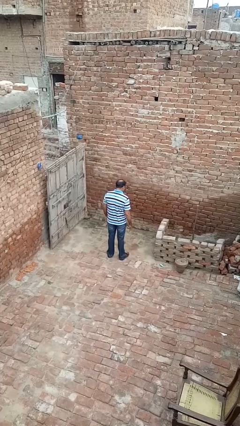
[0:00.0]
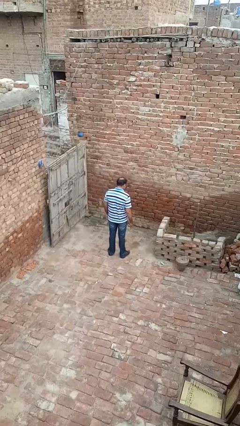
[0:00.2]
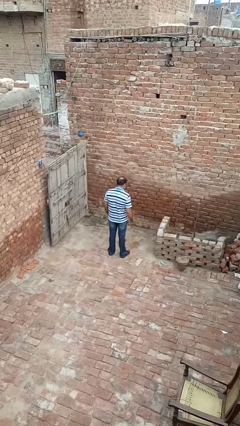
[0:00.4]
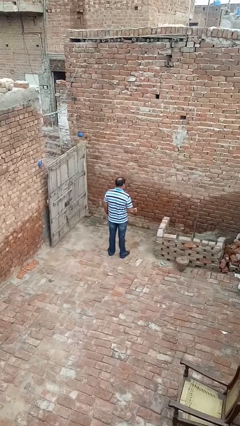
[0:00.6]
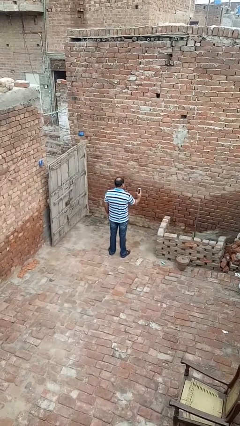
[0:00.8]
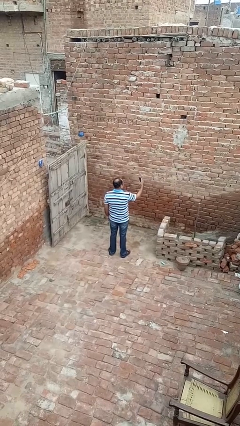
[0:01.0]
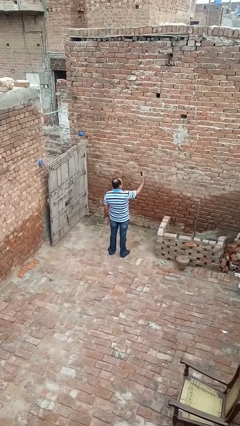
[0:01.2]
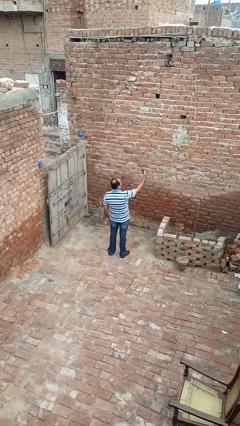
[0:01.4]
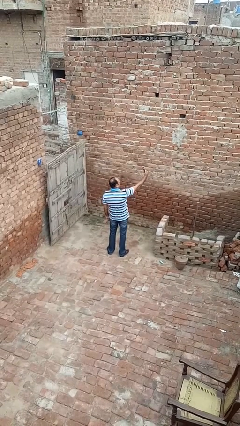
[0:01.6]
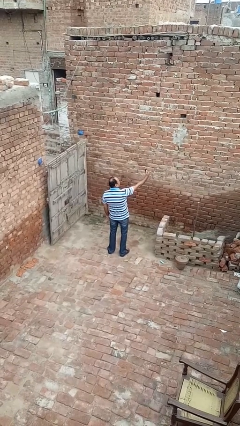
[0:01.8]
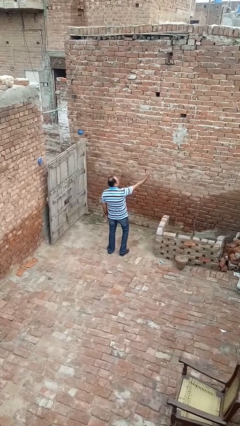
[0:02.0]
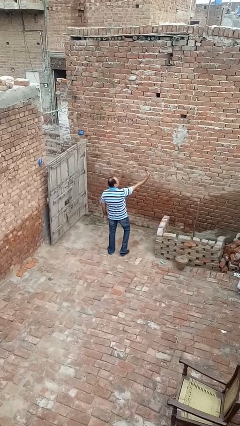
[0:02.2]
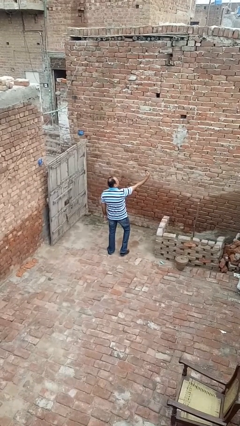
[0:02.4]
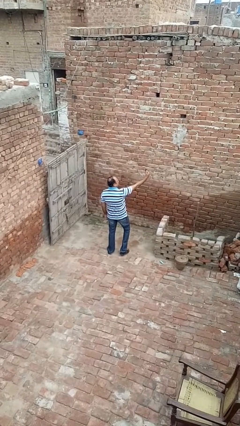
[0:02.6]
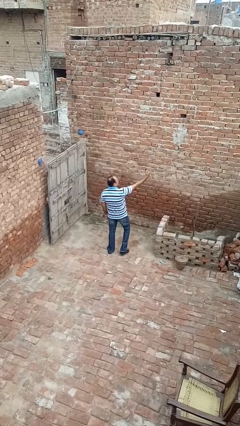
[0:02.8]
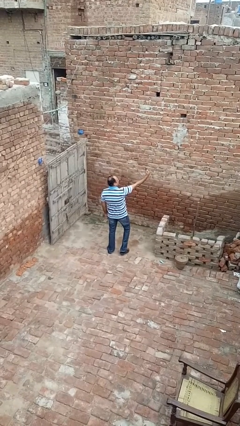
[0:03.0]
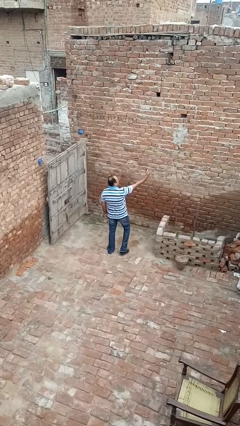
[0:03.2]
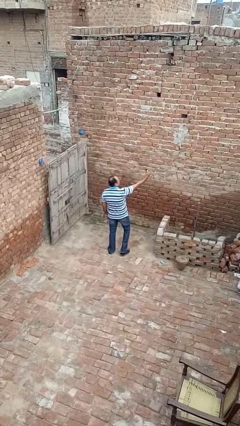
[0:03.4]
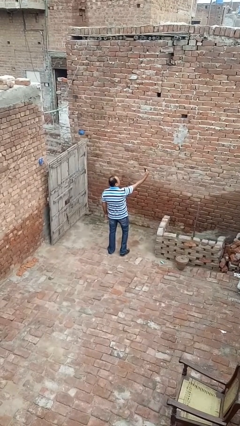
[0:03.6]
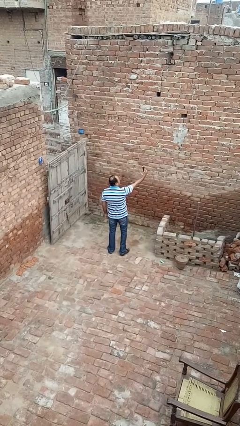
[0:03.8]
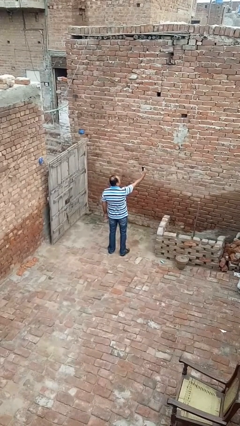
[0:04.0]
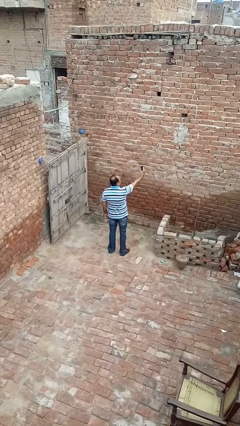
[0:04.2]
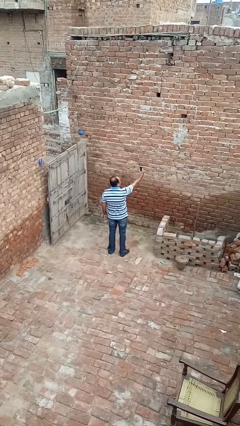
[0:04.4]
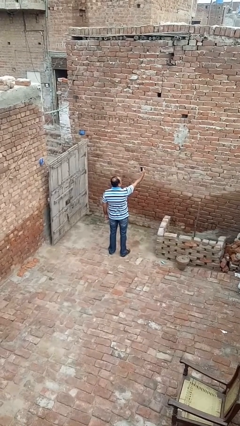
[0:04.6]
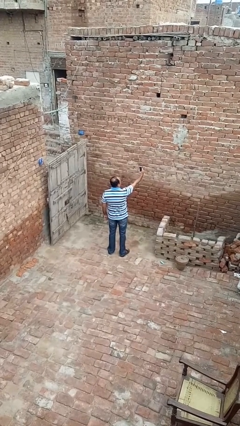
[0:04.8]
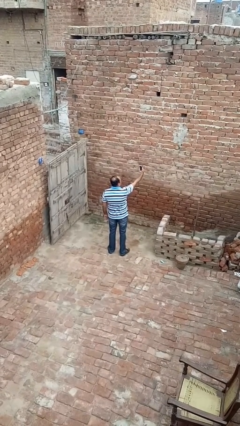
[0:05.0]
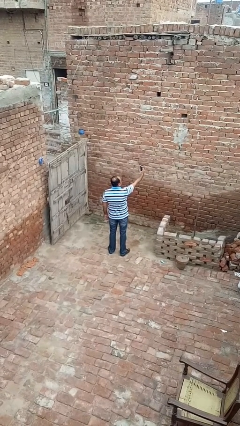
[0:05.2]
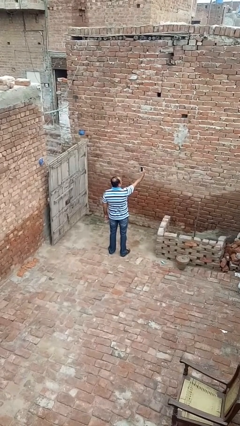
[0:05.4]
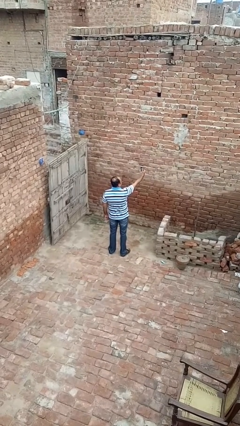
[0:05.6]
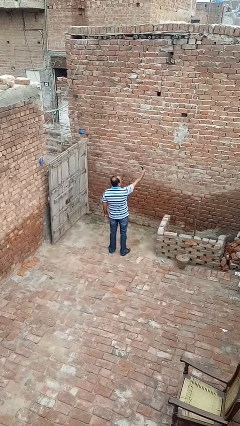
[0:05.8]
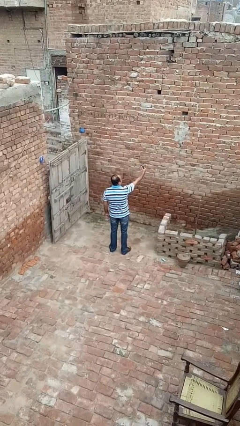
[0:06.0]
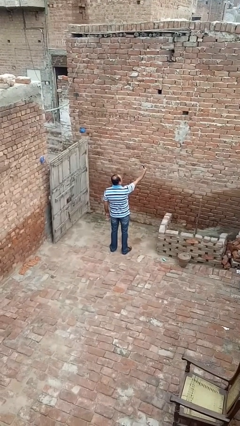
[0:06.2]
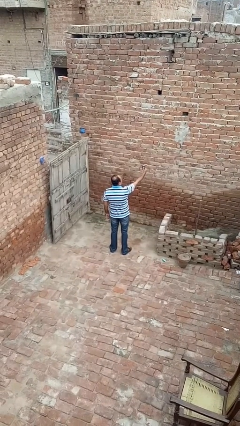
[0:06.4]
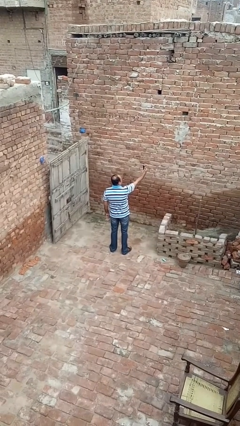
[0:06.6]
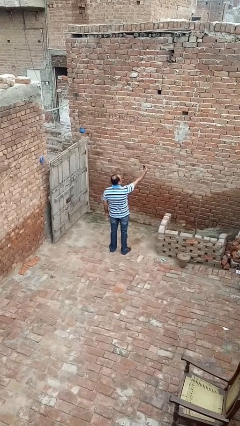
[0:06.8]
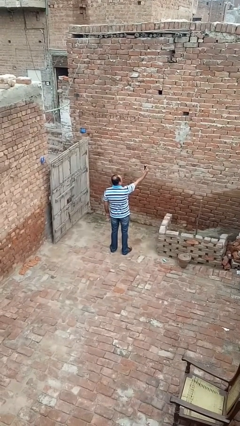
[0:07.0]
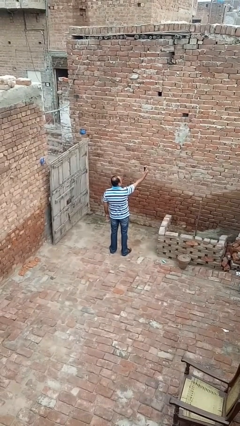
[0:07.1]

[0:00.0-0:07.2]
person takes selfie

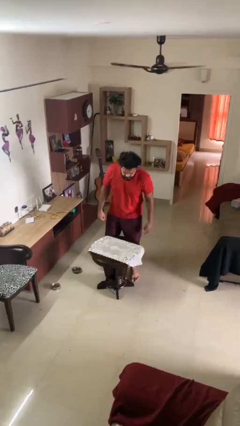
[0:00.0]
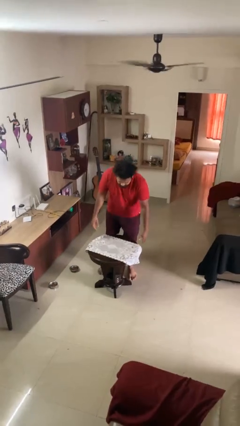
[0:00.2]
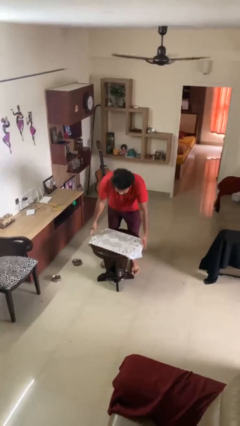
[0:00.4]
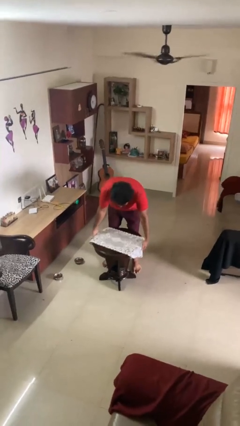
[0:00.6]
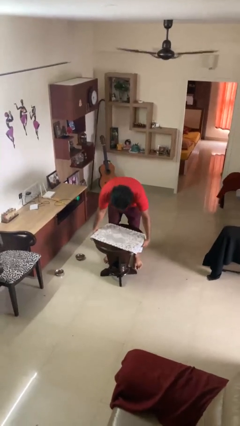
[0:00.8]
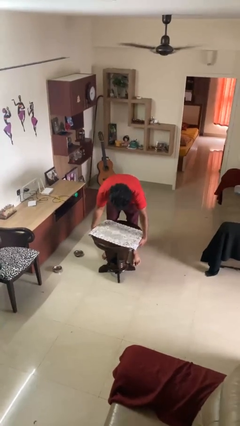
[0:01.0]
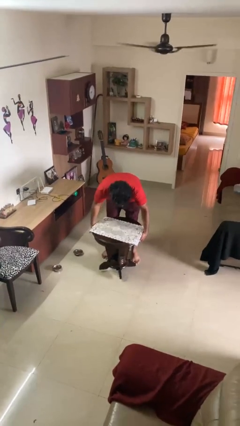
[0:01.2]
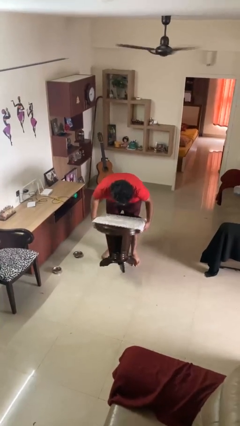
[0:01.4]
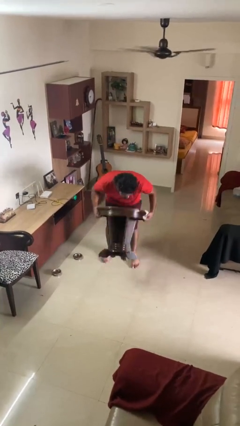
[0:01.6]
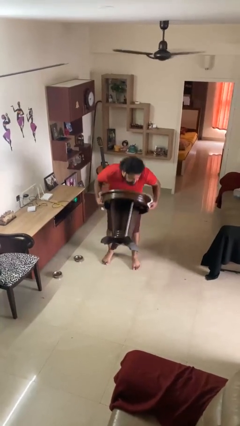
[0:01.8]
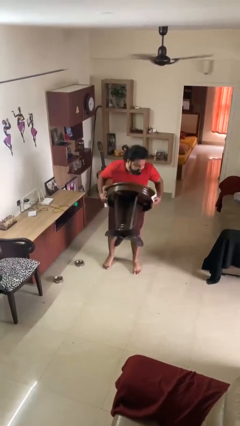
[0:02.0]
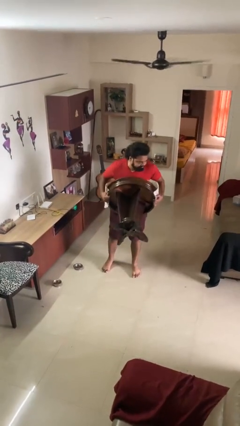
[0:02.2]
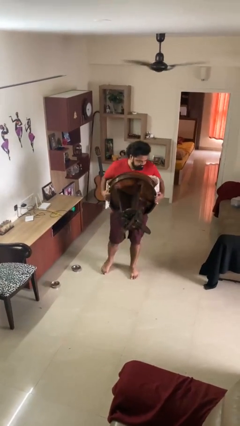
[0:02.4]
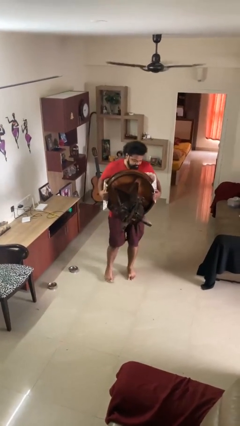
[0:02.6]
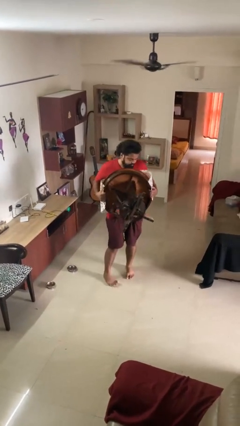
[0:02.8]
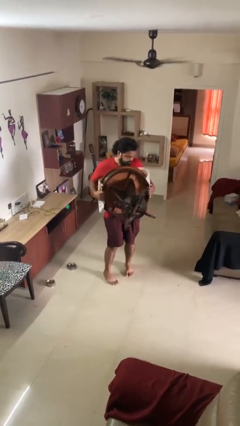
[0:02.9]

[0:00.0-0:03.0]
person picks up object from floor

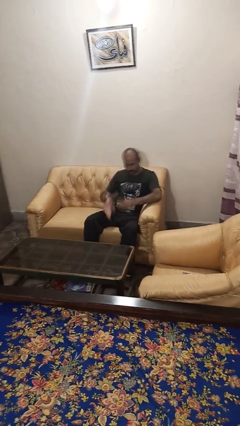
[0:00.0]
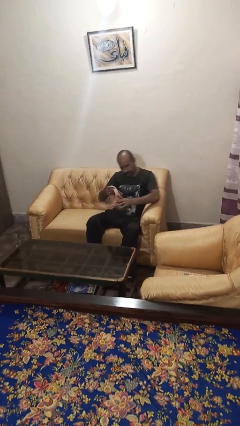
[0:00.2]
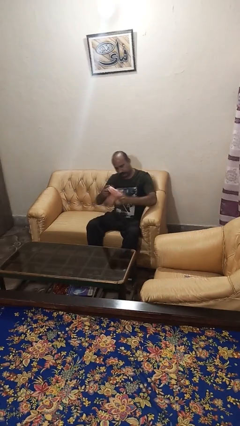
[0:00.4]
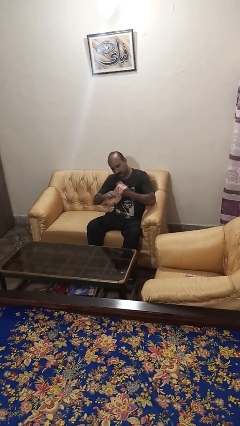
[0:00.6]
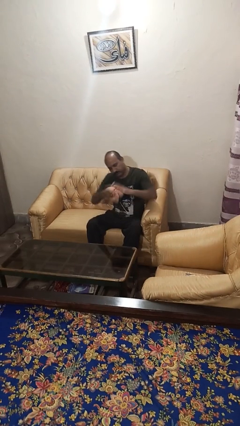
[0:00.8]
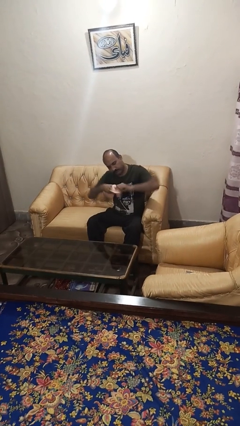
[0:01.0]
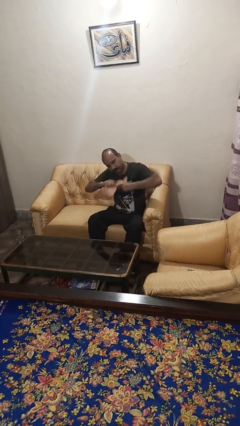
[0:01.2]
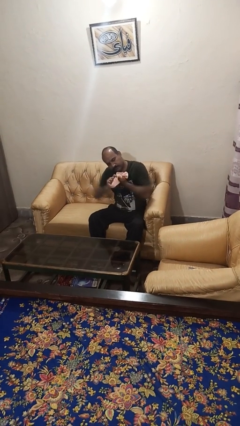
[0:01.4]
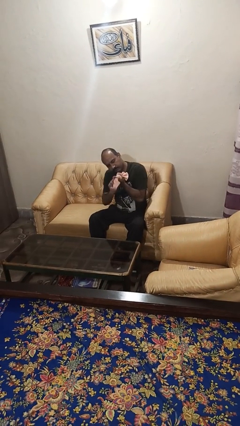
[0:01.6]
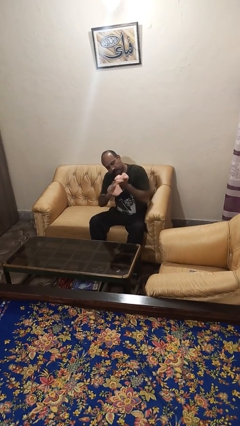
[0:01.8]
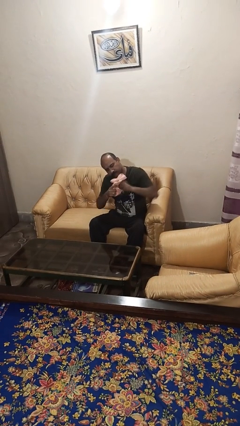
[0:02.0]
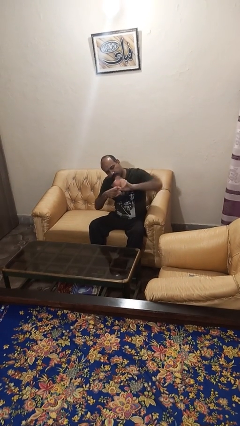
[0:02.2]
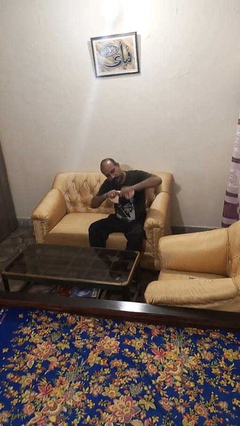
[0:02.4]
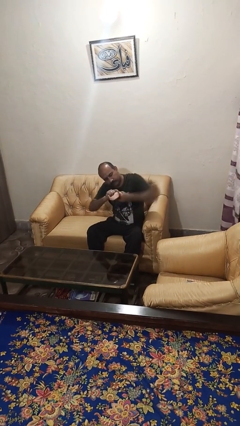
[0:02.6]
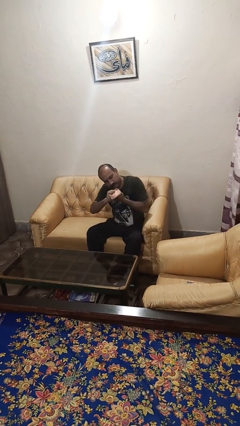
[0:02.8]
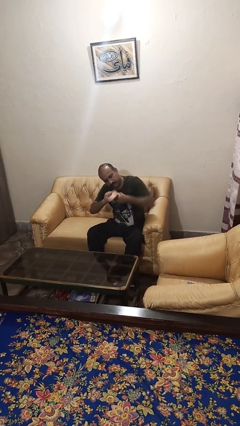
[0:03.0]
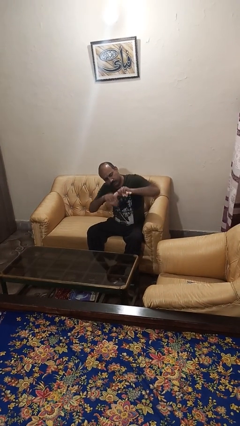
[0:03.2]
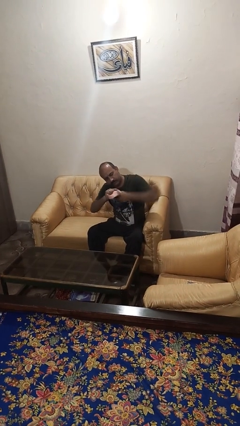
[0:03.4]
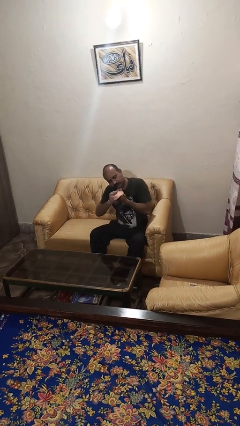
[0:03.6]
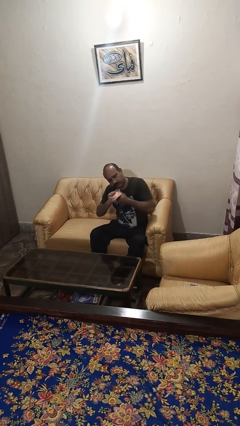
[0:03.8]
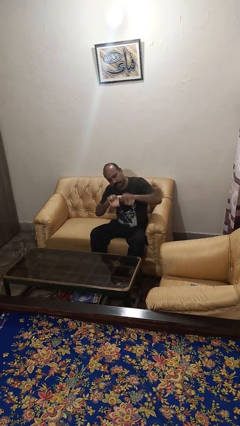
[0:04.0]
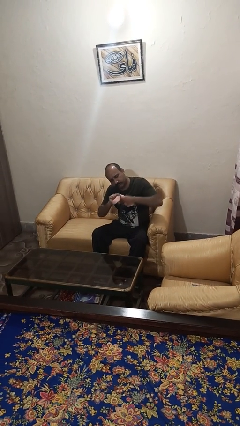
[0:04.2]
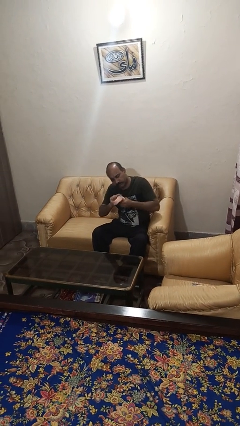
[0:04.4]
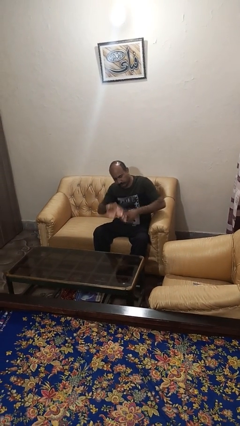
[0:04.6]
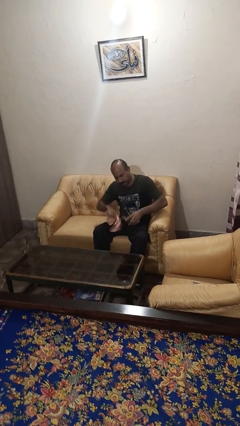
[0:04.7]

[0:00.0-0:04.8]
person squeezes object

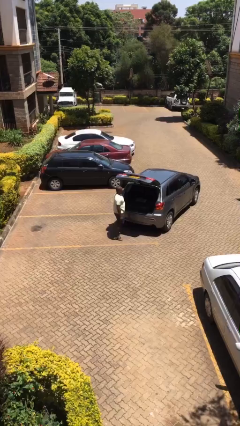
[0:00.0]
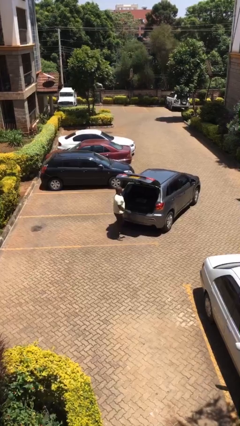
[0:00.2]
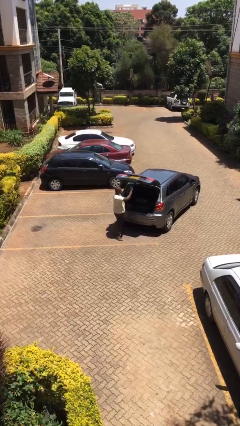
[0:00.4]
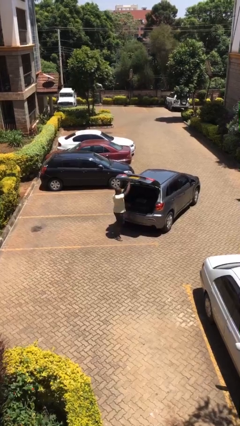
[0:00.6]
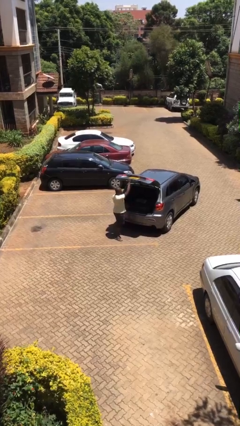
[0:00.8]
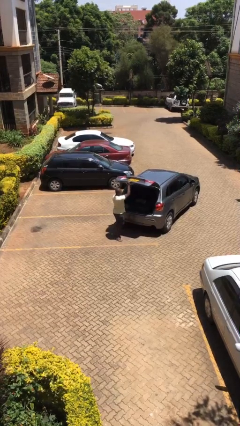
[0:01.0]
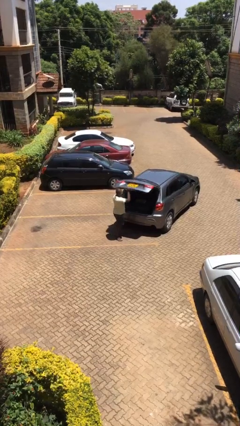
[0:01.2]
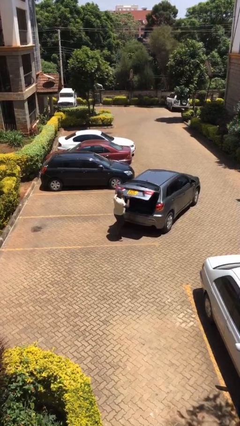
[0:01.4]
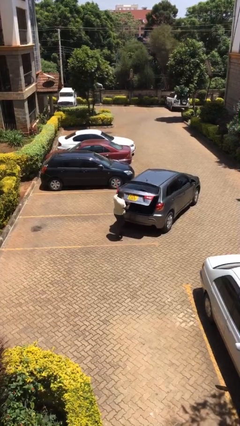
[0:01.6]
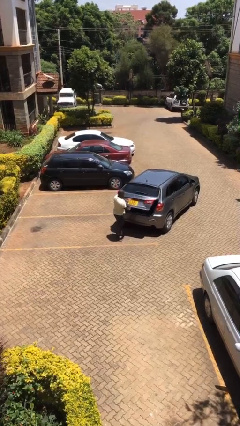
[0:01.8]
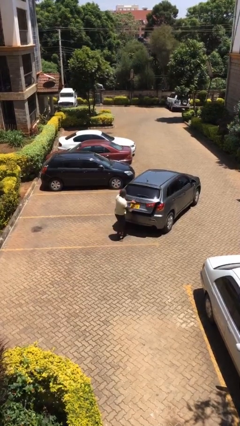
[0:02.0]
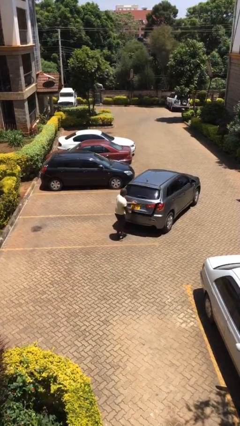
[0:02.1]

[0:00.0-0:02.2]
person closes car trunk

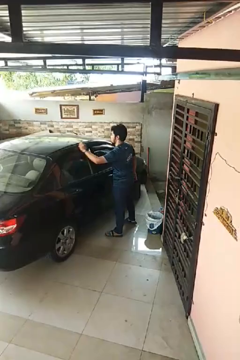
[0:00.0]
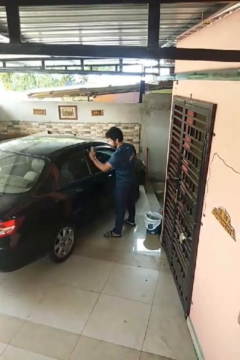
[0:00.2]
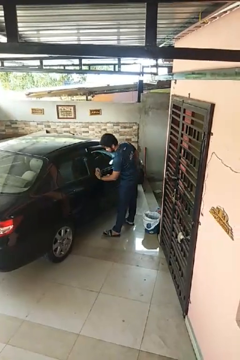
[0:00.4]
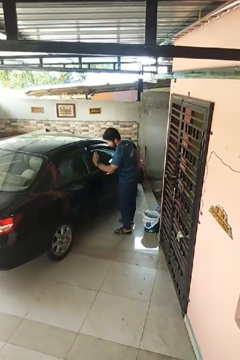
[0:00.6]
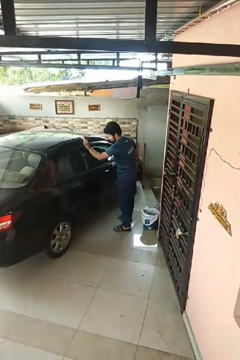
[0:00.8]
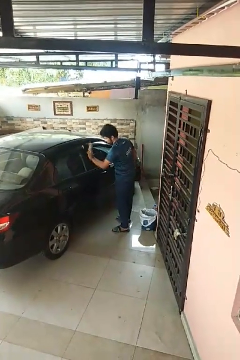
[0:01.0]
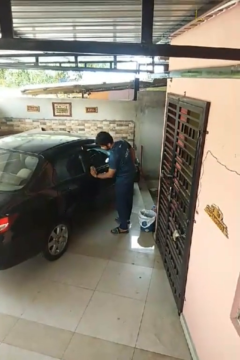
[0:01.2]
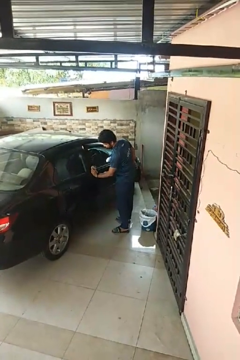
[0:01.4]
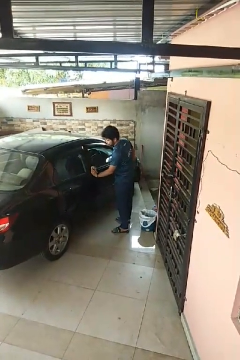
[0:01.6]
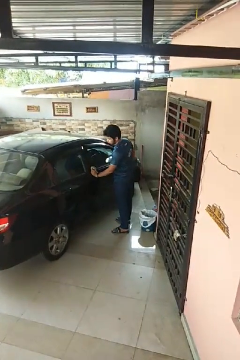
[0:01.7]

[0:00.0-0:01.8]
person polishes car with rag
